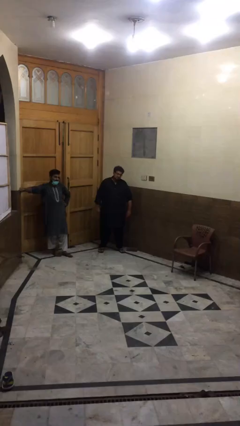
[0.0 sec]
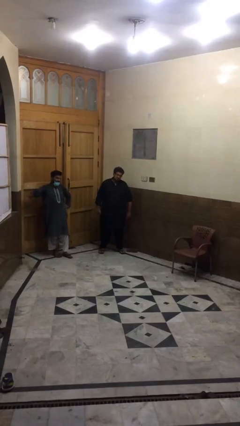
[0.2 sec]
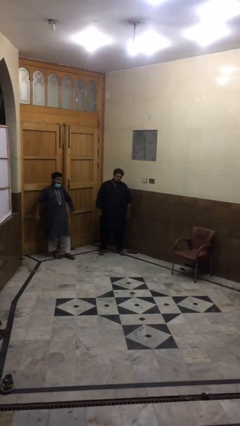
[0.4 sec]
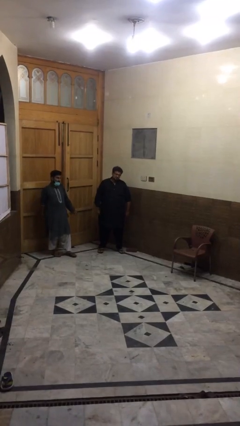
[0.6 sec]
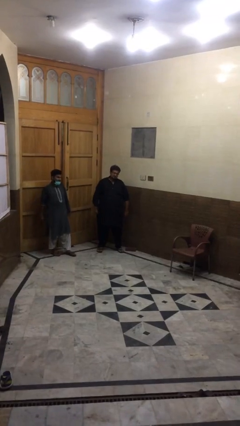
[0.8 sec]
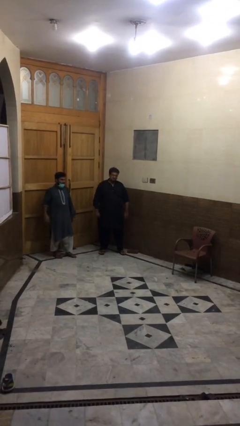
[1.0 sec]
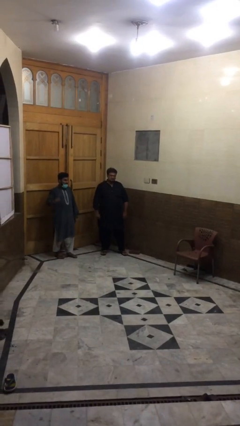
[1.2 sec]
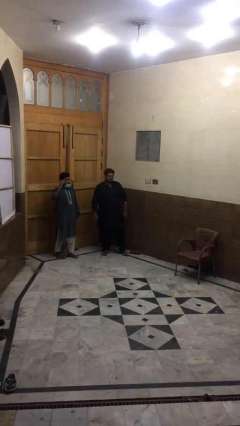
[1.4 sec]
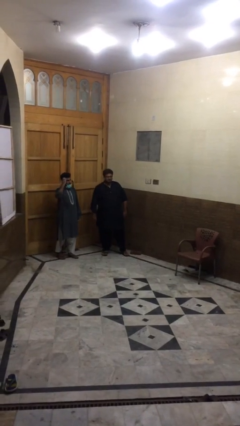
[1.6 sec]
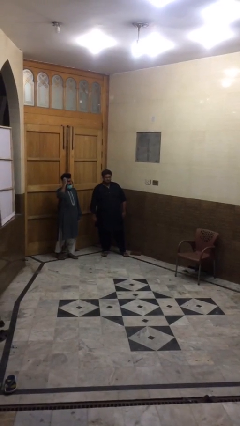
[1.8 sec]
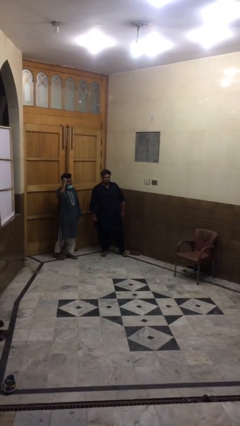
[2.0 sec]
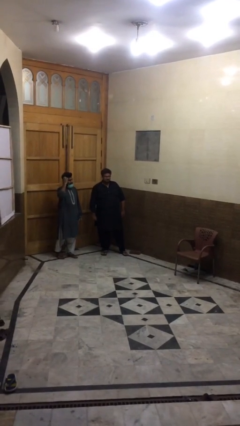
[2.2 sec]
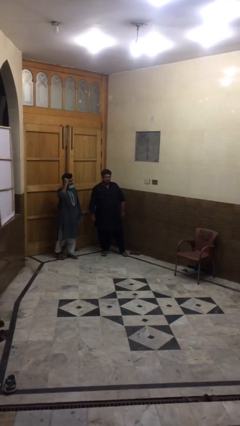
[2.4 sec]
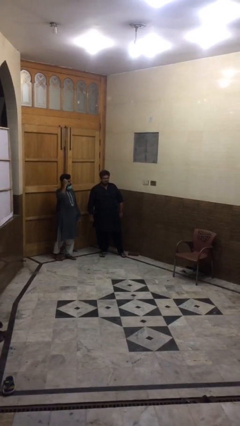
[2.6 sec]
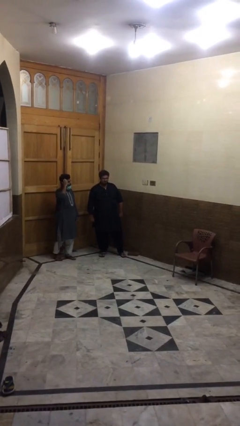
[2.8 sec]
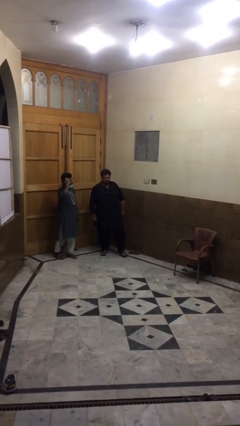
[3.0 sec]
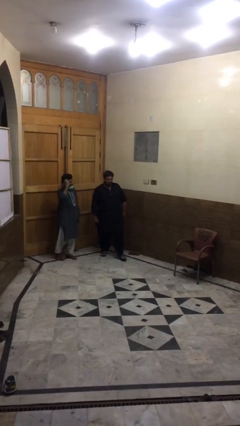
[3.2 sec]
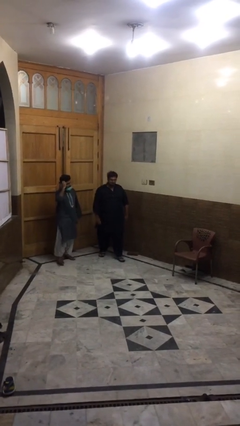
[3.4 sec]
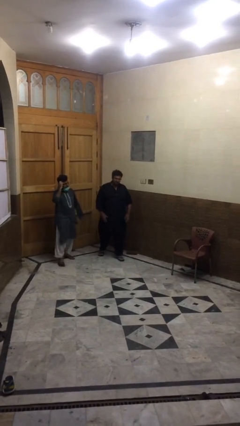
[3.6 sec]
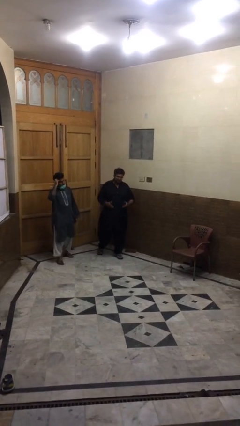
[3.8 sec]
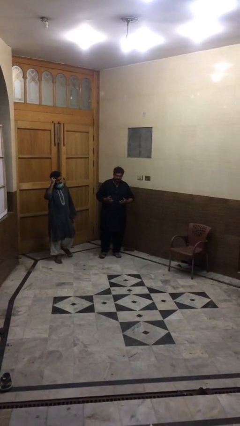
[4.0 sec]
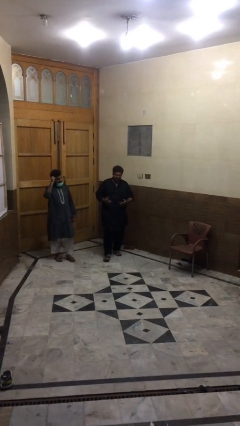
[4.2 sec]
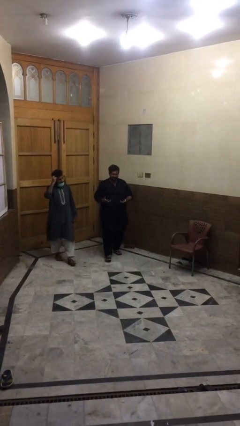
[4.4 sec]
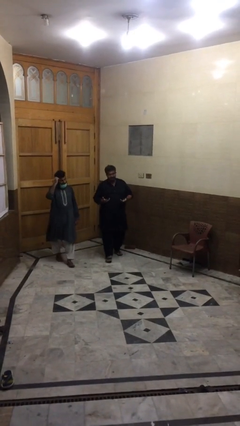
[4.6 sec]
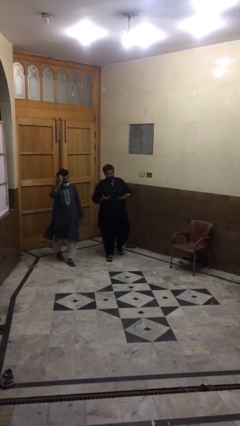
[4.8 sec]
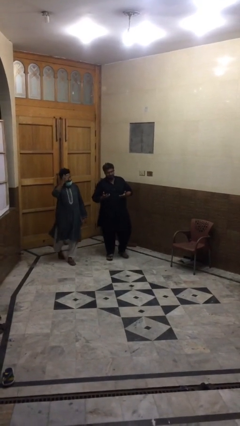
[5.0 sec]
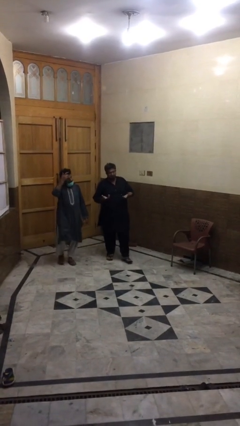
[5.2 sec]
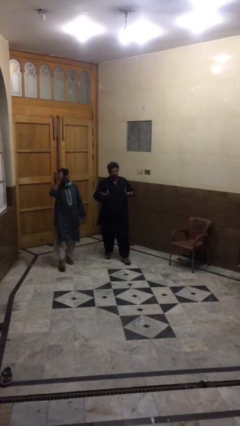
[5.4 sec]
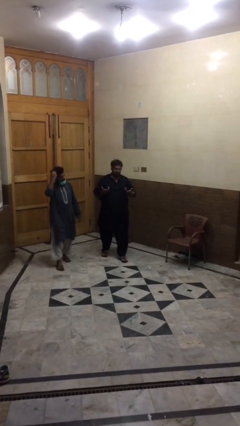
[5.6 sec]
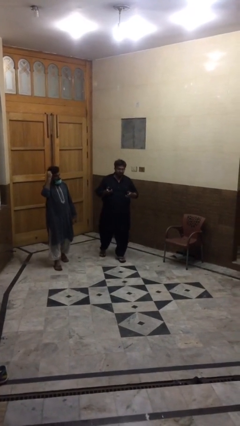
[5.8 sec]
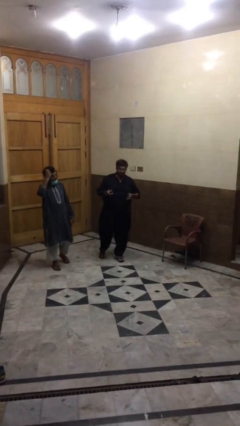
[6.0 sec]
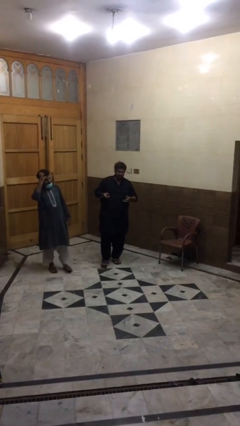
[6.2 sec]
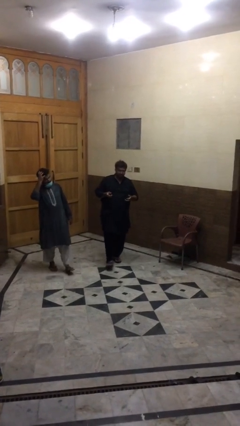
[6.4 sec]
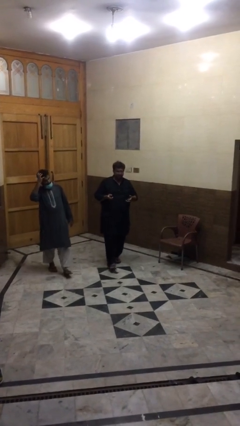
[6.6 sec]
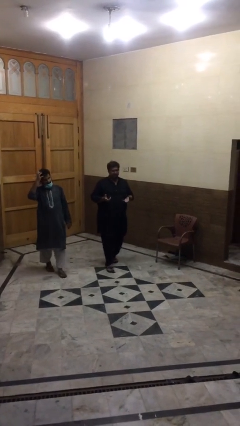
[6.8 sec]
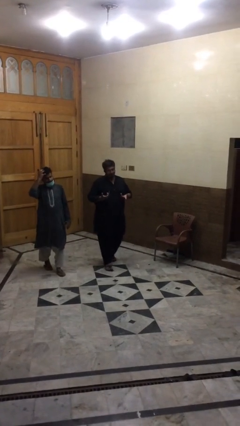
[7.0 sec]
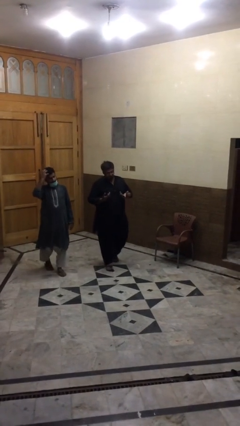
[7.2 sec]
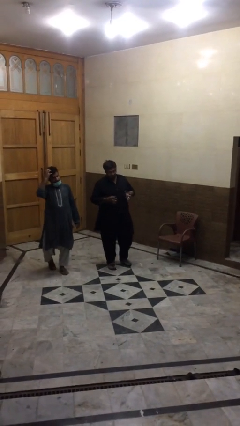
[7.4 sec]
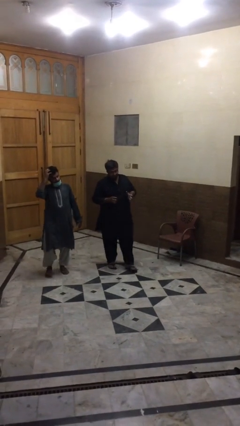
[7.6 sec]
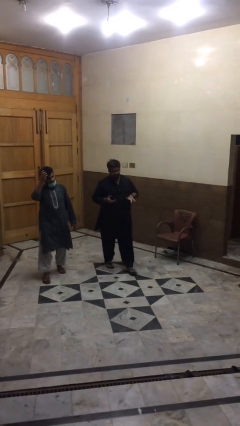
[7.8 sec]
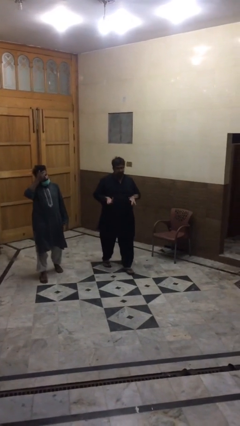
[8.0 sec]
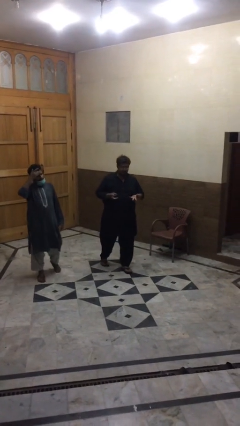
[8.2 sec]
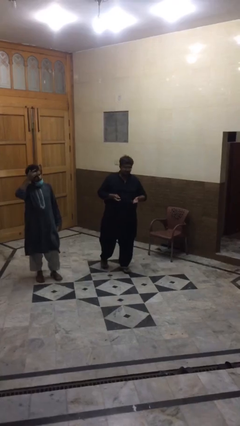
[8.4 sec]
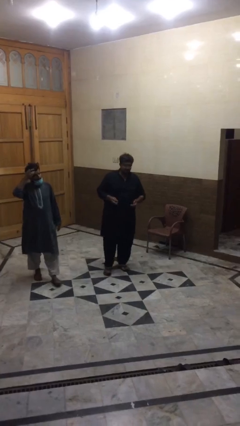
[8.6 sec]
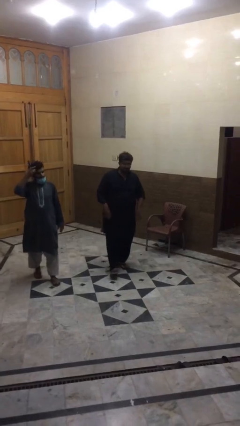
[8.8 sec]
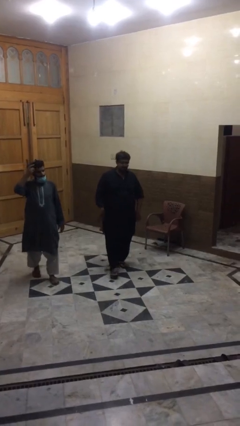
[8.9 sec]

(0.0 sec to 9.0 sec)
person talks to person

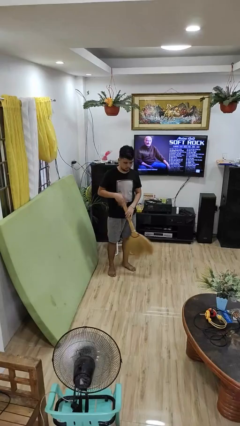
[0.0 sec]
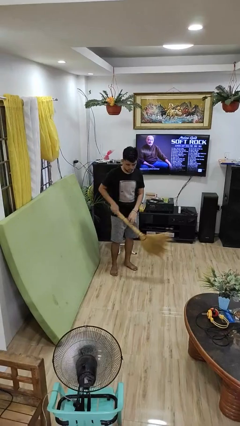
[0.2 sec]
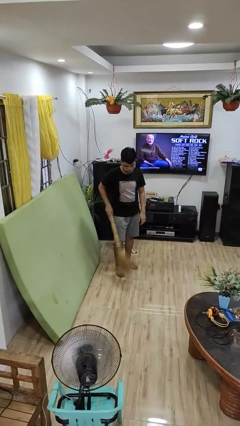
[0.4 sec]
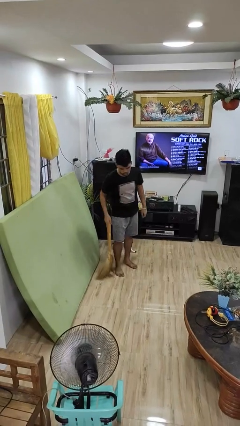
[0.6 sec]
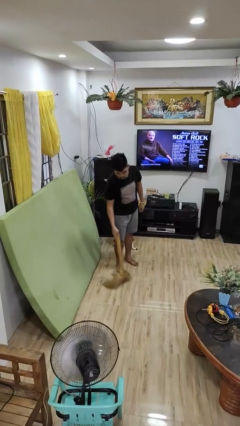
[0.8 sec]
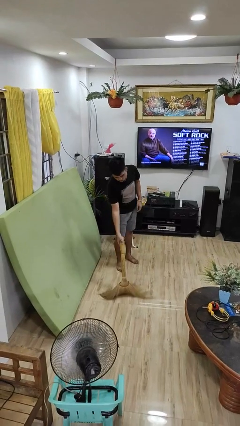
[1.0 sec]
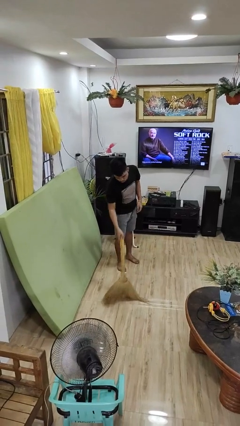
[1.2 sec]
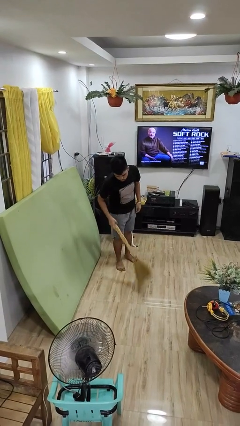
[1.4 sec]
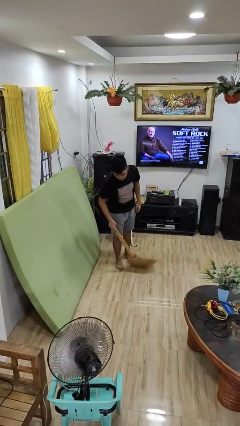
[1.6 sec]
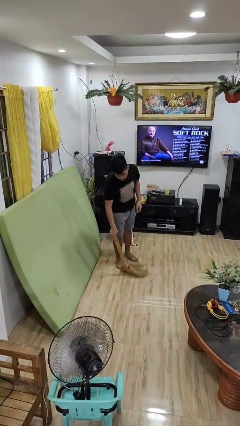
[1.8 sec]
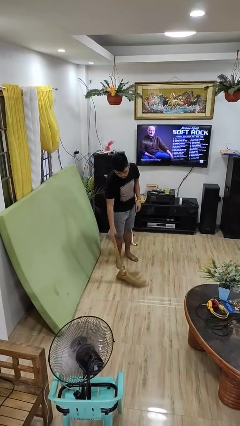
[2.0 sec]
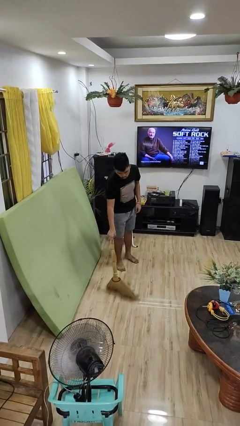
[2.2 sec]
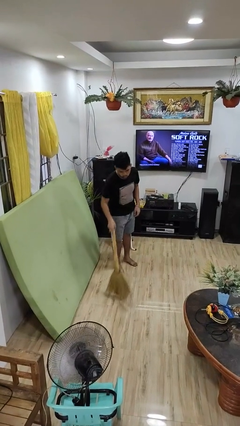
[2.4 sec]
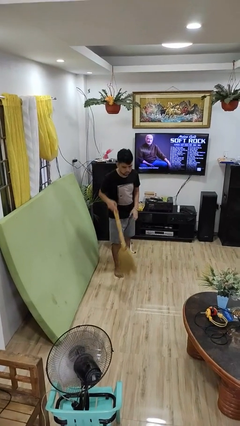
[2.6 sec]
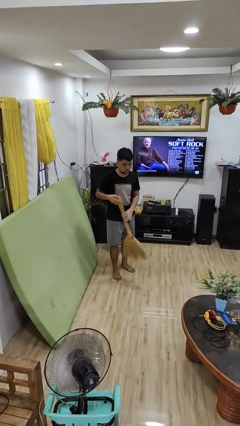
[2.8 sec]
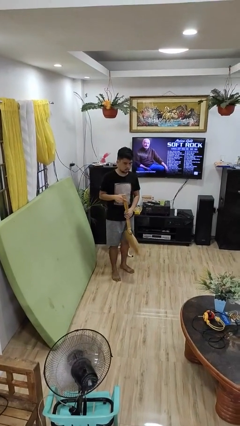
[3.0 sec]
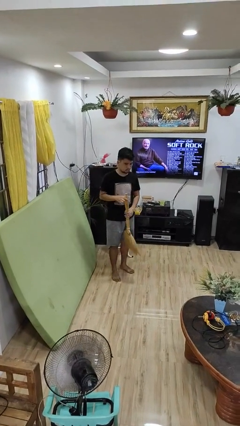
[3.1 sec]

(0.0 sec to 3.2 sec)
person sweeps floor

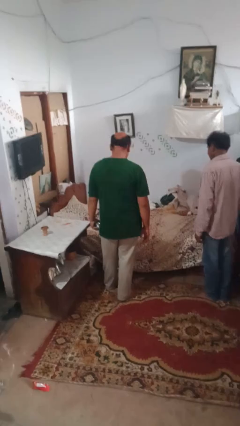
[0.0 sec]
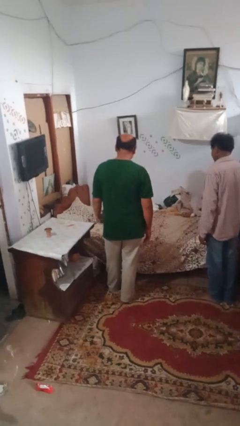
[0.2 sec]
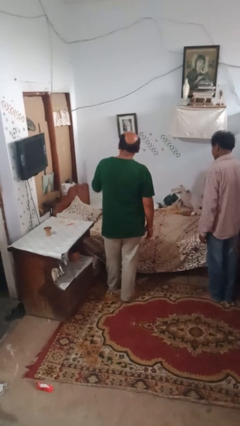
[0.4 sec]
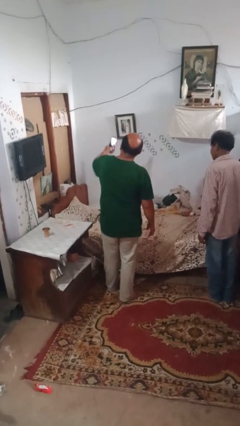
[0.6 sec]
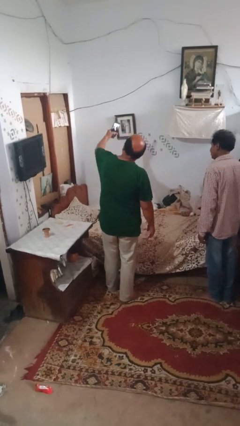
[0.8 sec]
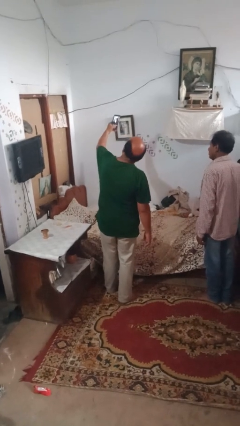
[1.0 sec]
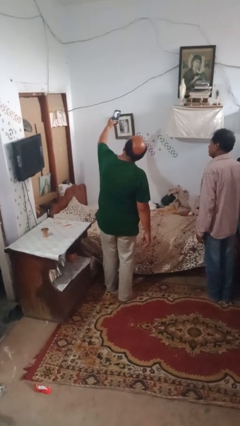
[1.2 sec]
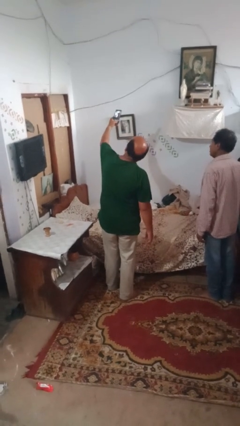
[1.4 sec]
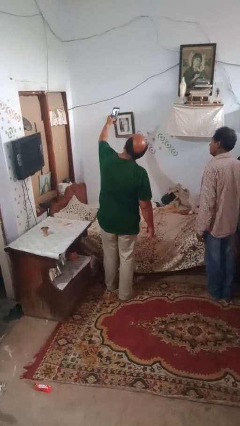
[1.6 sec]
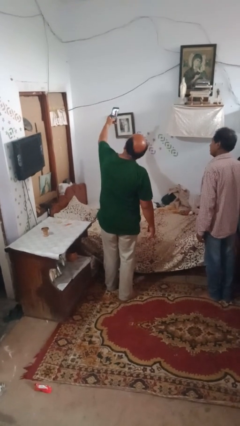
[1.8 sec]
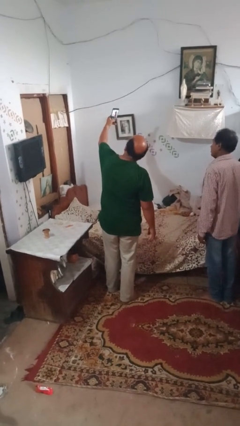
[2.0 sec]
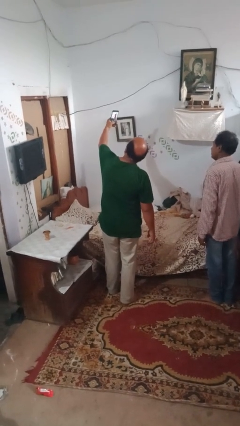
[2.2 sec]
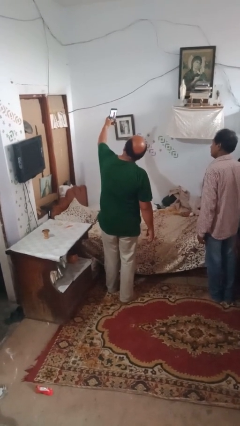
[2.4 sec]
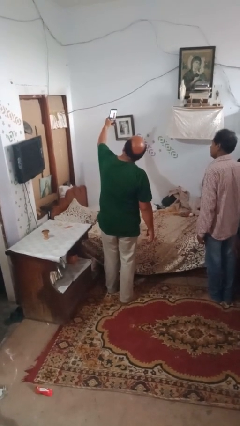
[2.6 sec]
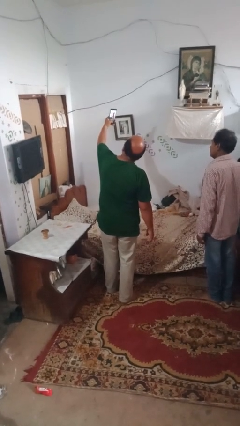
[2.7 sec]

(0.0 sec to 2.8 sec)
person takes selfie with person

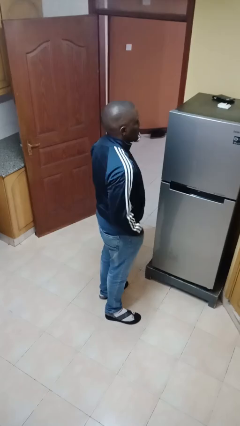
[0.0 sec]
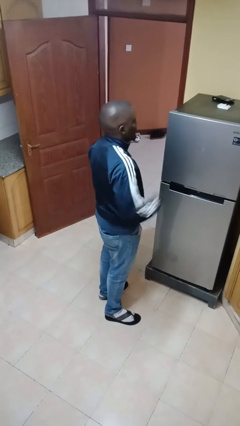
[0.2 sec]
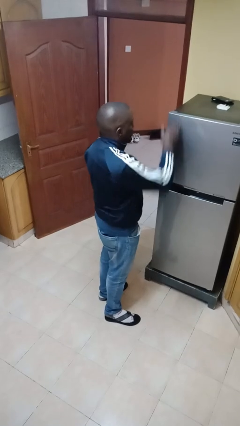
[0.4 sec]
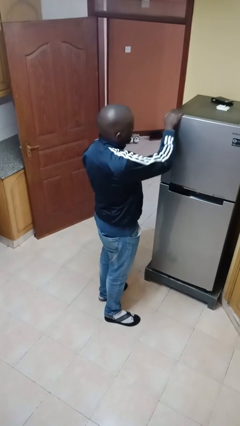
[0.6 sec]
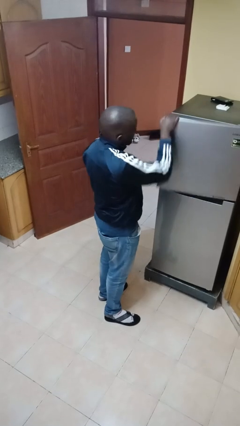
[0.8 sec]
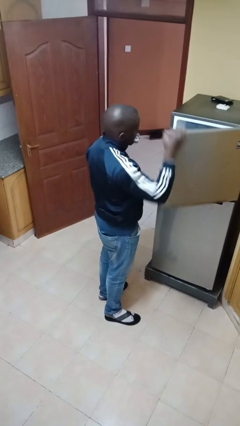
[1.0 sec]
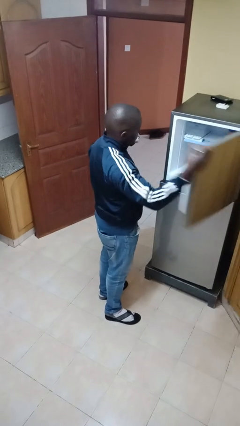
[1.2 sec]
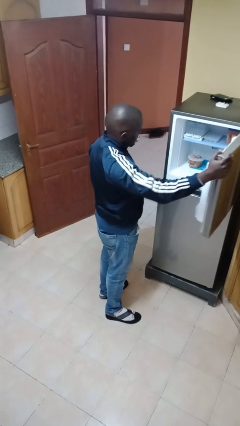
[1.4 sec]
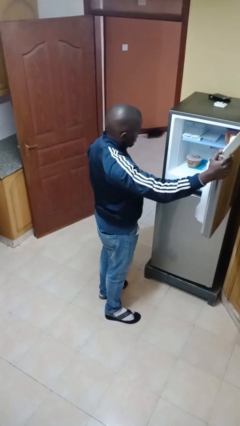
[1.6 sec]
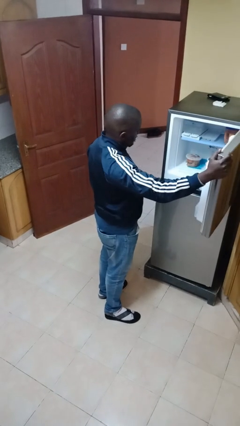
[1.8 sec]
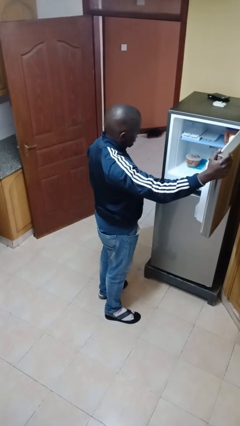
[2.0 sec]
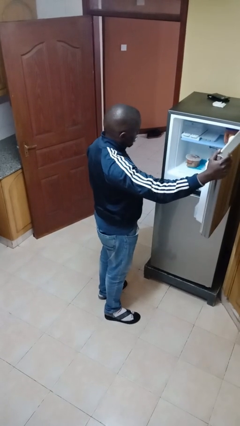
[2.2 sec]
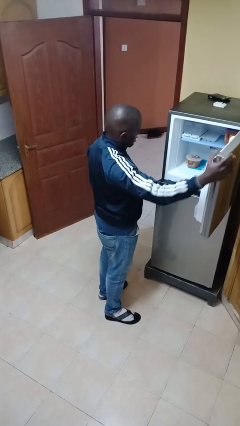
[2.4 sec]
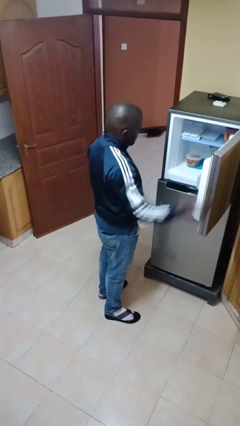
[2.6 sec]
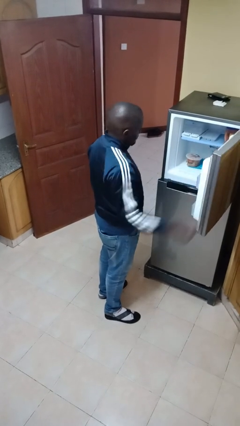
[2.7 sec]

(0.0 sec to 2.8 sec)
person opens refrigerator
